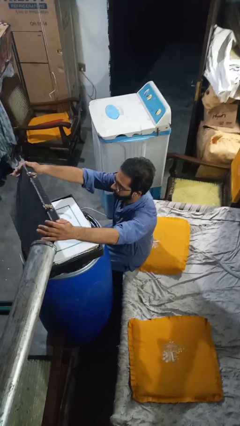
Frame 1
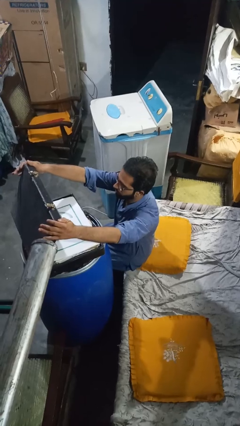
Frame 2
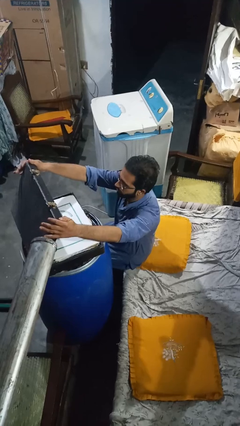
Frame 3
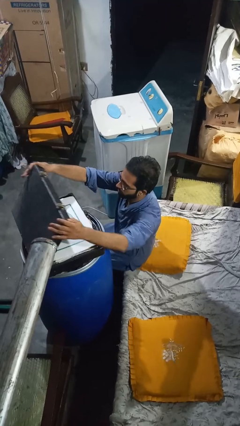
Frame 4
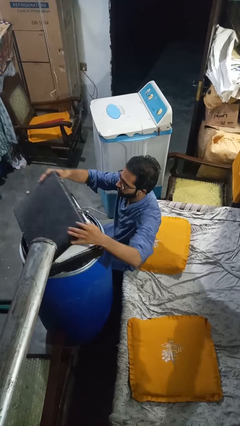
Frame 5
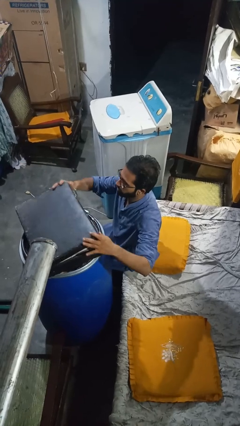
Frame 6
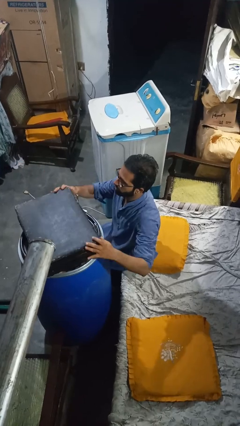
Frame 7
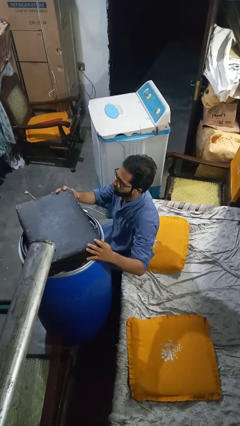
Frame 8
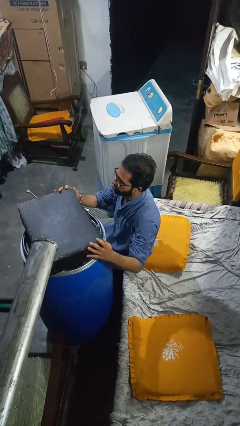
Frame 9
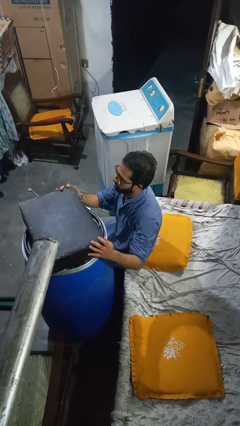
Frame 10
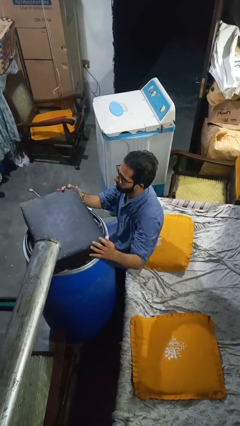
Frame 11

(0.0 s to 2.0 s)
person closes suitcase

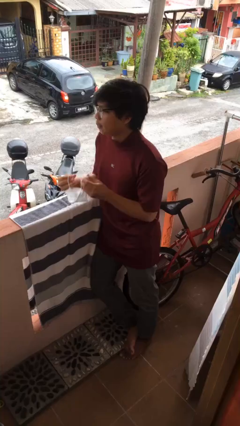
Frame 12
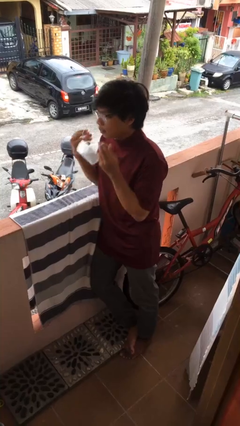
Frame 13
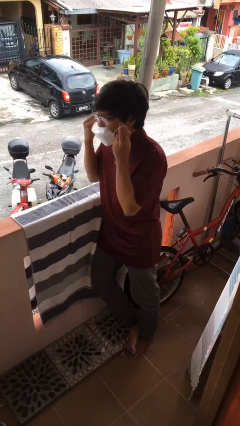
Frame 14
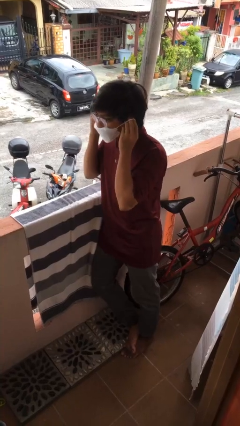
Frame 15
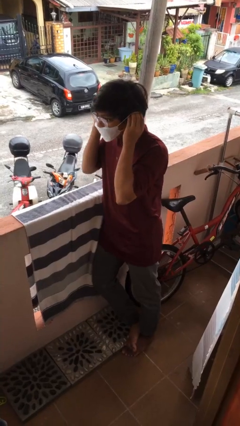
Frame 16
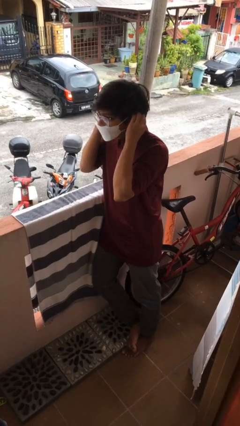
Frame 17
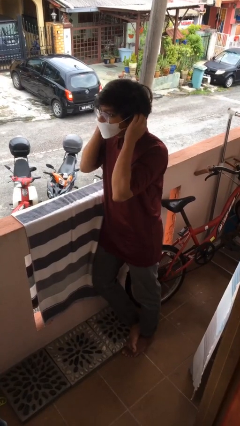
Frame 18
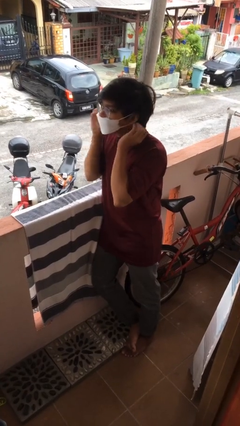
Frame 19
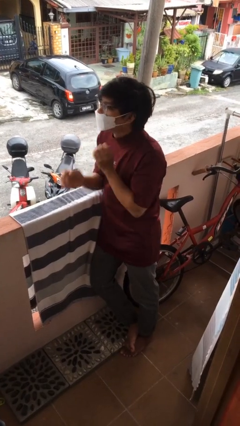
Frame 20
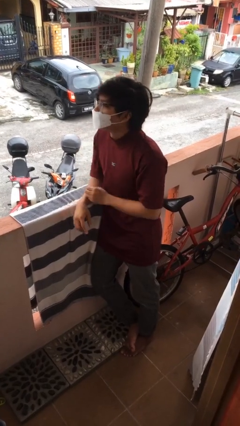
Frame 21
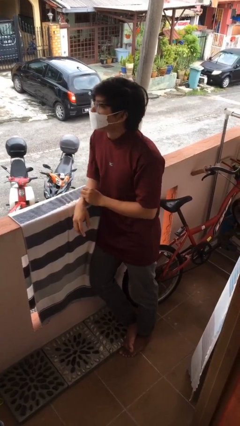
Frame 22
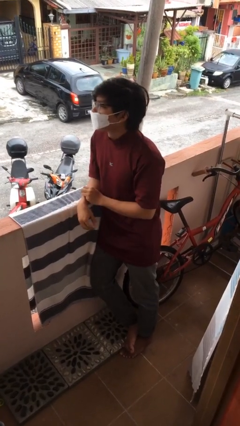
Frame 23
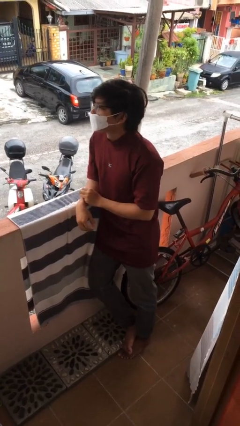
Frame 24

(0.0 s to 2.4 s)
person puts on facemask

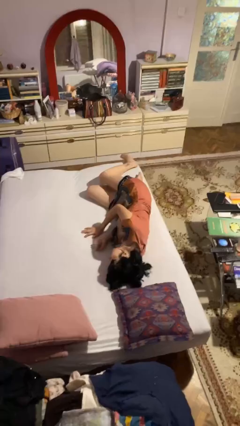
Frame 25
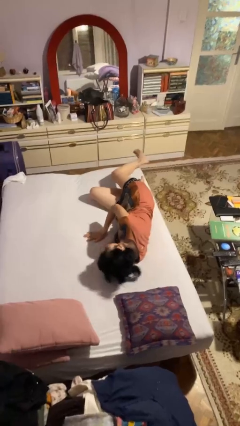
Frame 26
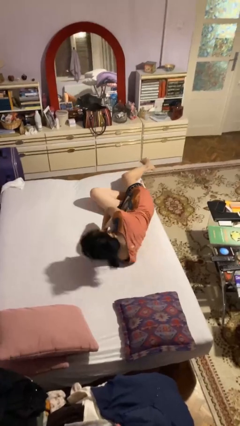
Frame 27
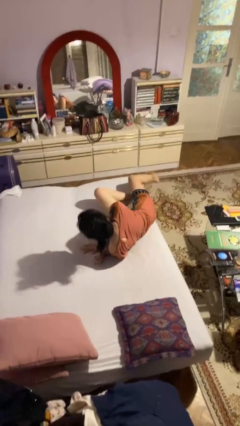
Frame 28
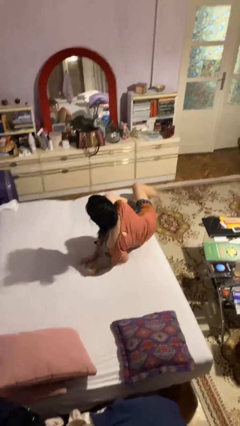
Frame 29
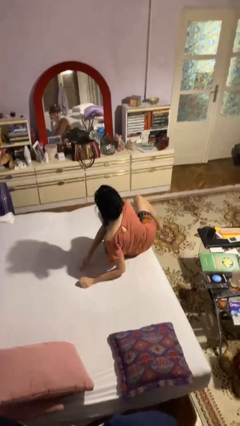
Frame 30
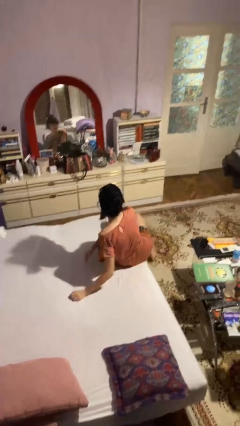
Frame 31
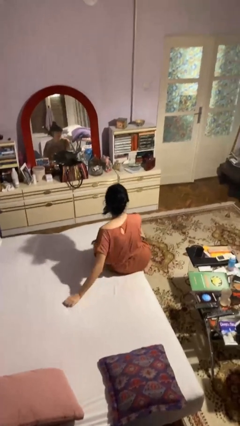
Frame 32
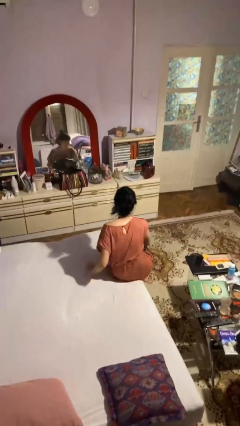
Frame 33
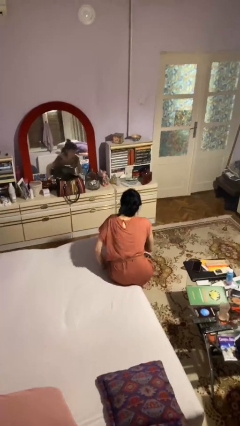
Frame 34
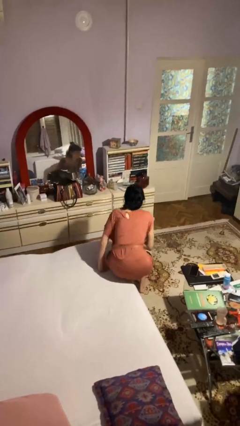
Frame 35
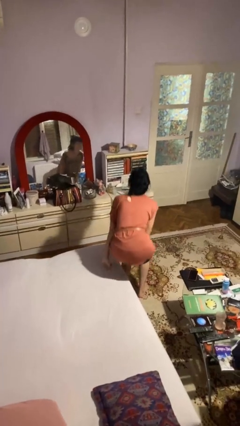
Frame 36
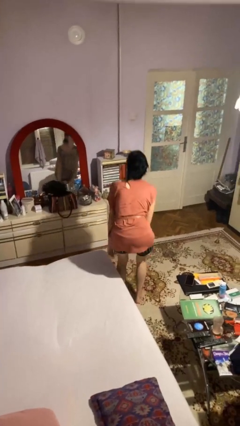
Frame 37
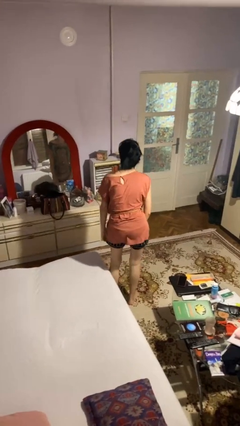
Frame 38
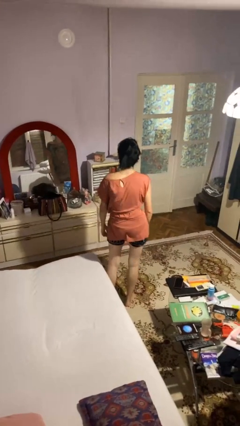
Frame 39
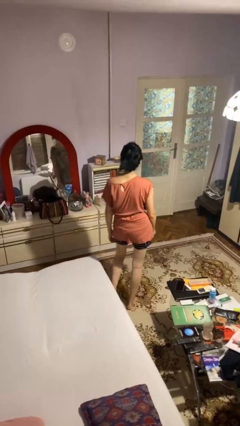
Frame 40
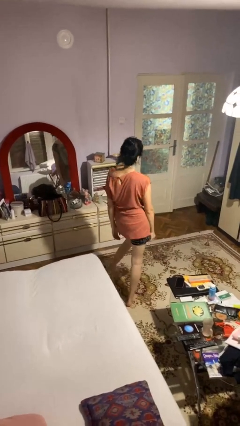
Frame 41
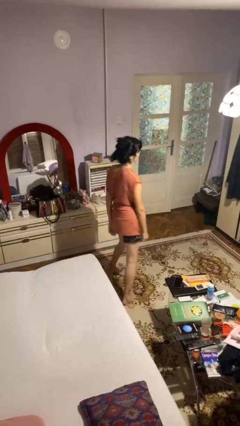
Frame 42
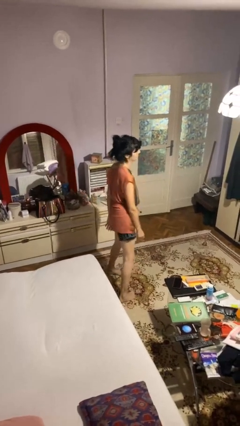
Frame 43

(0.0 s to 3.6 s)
person stands up

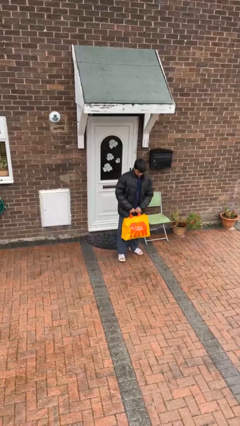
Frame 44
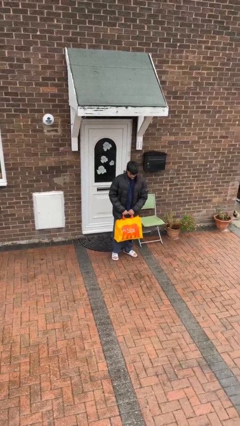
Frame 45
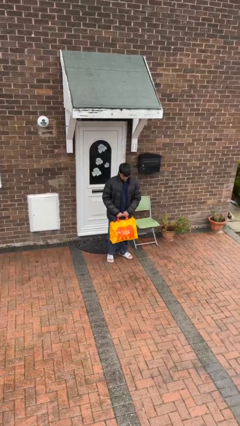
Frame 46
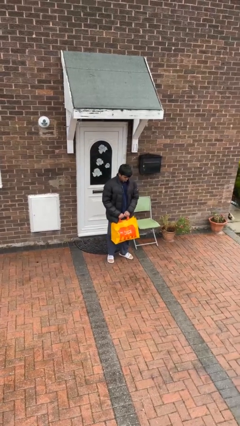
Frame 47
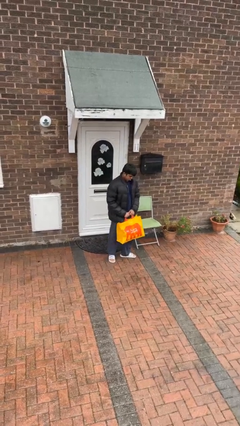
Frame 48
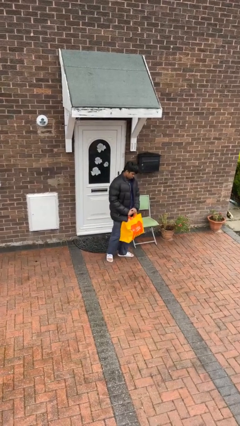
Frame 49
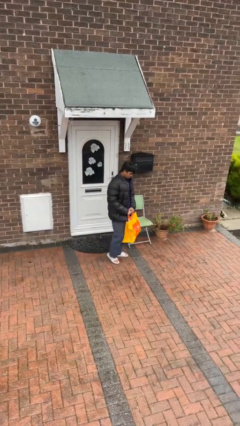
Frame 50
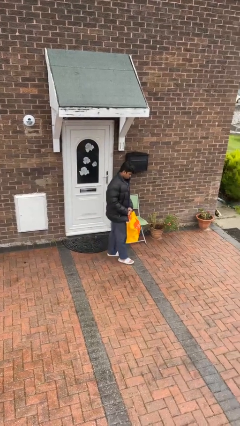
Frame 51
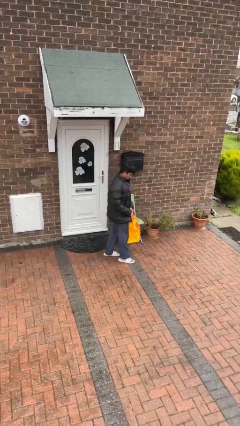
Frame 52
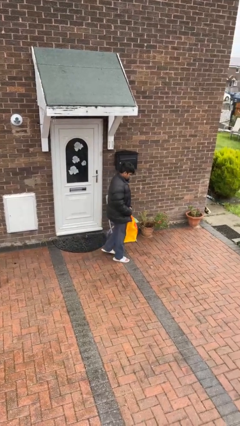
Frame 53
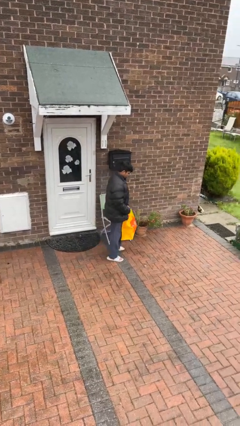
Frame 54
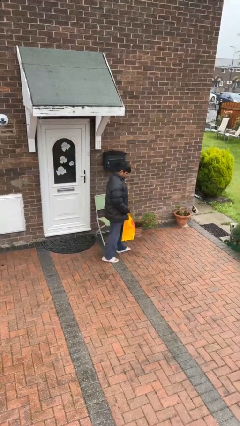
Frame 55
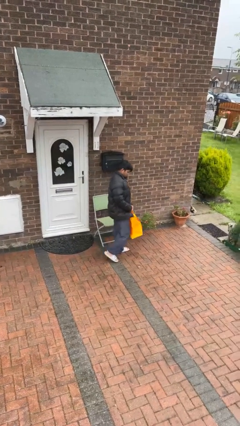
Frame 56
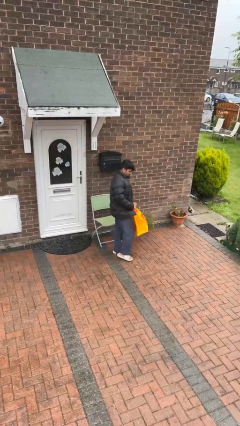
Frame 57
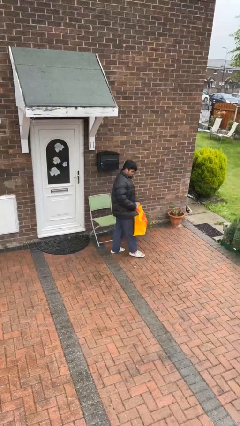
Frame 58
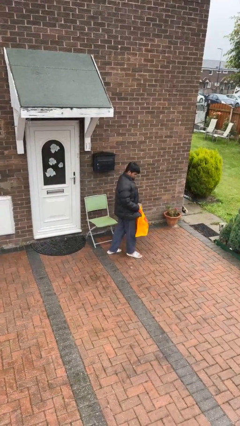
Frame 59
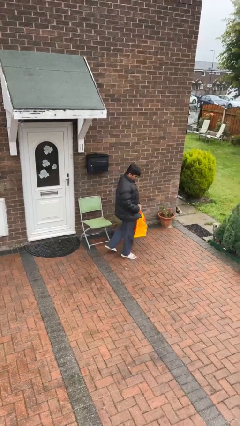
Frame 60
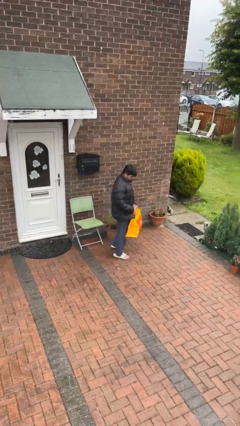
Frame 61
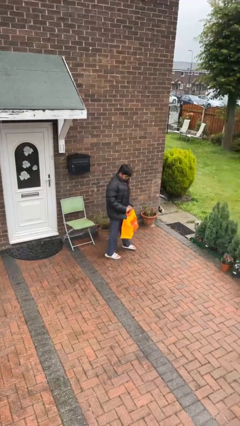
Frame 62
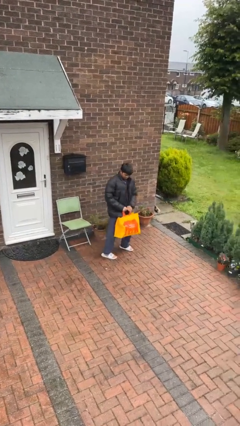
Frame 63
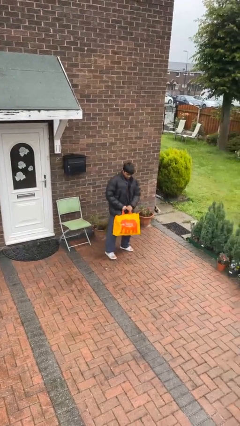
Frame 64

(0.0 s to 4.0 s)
person carries groceries

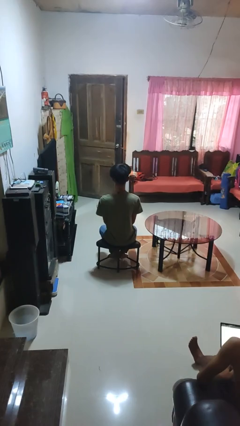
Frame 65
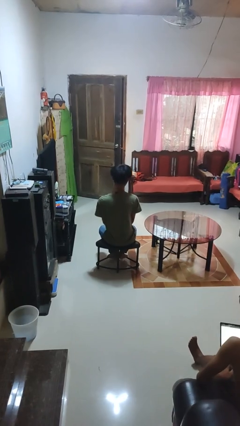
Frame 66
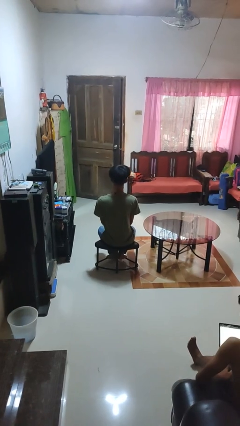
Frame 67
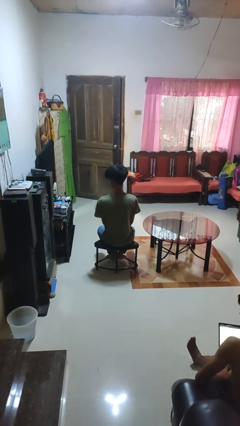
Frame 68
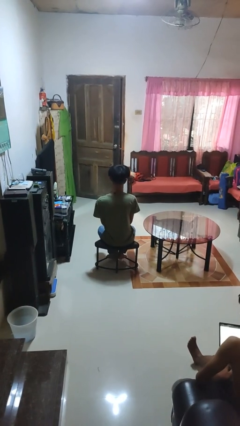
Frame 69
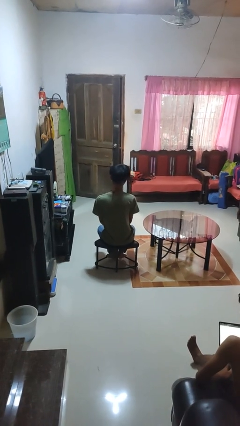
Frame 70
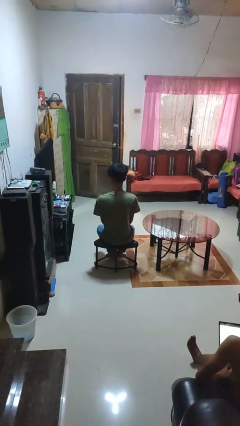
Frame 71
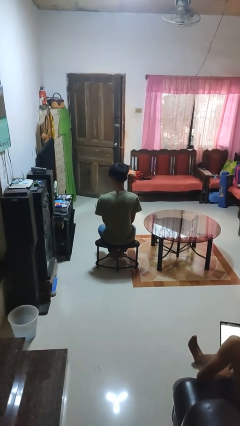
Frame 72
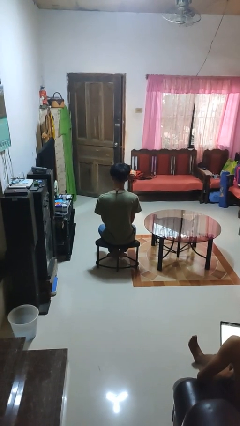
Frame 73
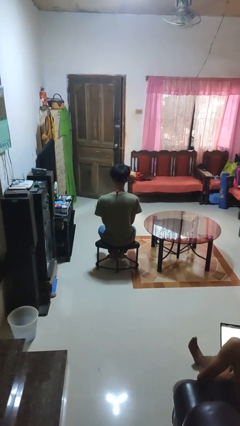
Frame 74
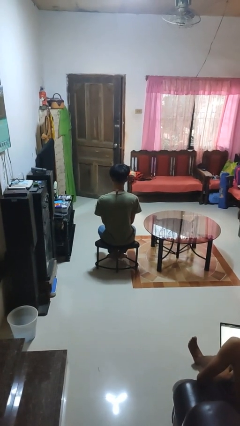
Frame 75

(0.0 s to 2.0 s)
person shakes head

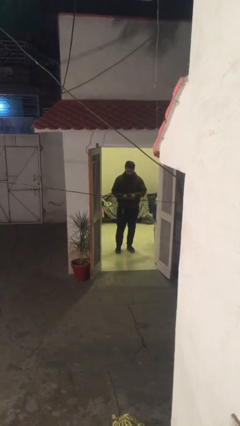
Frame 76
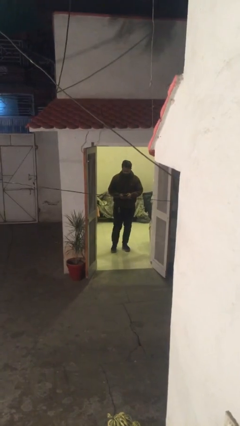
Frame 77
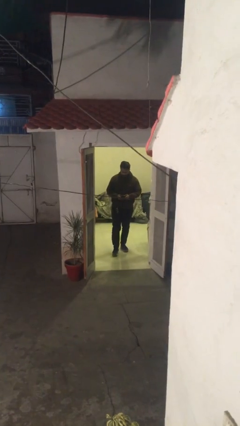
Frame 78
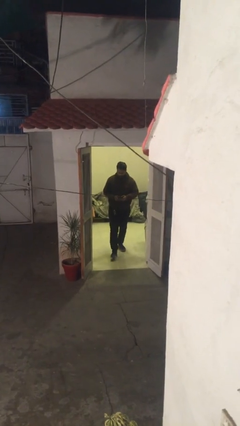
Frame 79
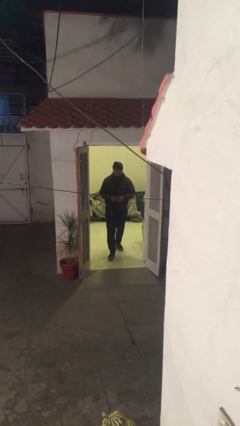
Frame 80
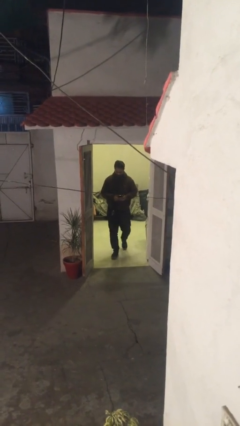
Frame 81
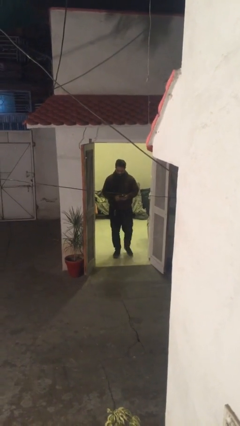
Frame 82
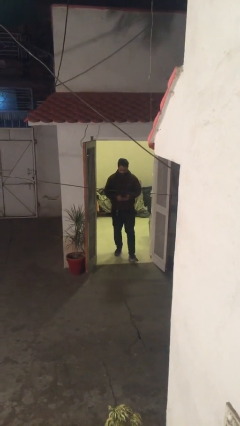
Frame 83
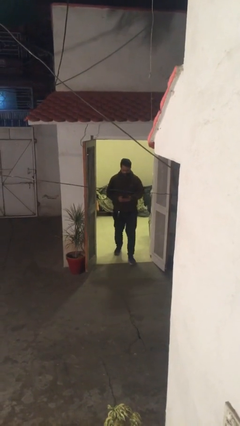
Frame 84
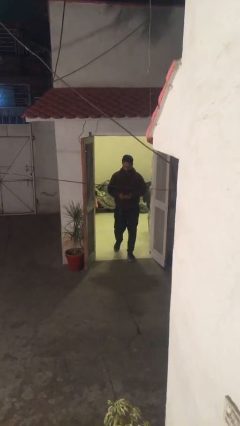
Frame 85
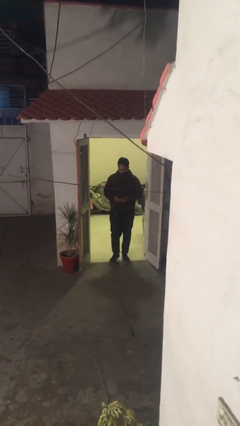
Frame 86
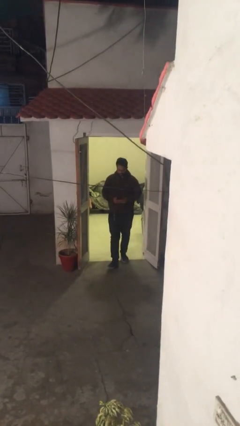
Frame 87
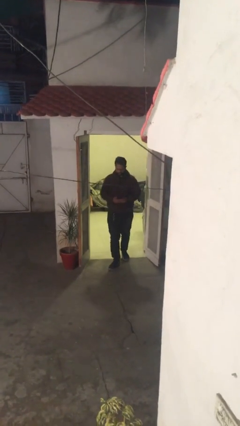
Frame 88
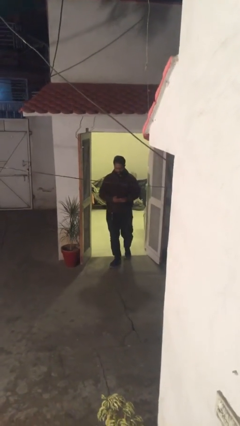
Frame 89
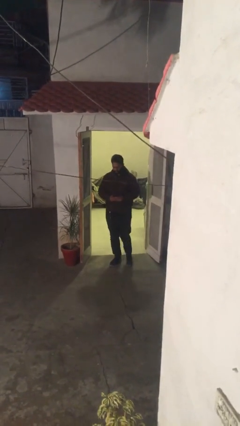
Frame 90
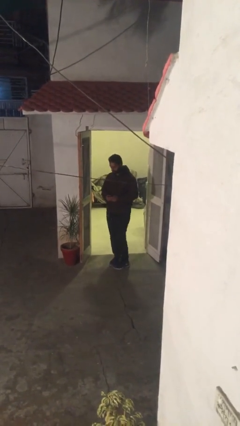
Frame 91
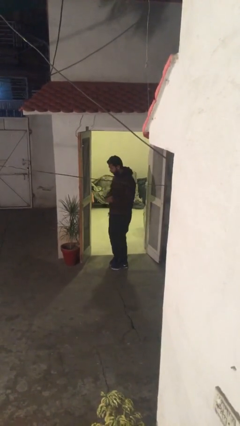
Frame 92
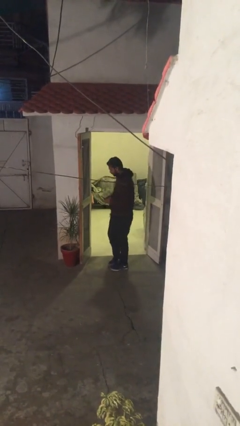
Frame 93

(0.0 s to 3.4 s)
person enters scene through structure
